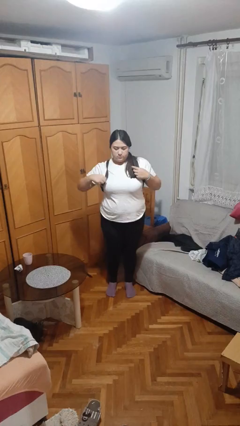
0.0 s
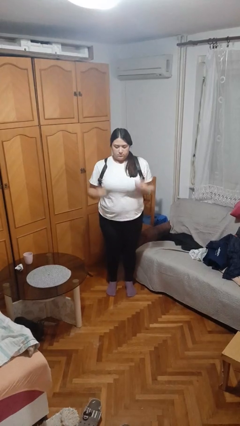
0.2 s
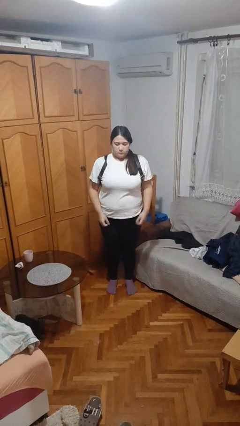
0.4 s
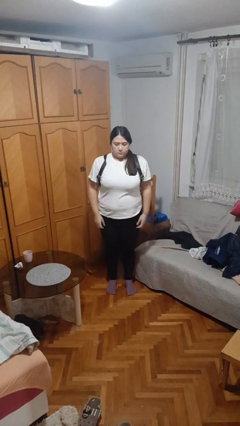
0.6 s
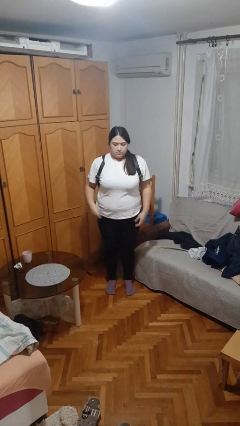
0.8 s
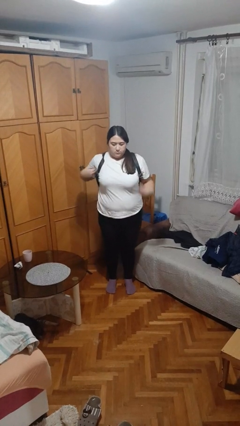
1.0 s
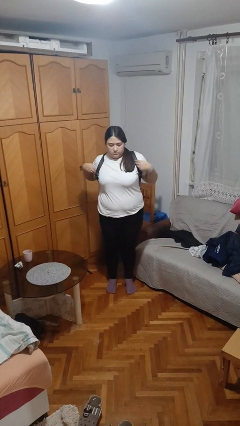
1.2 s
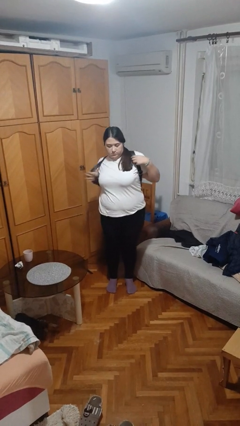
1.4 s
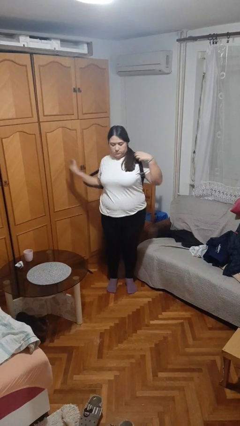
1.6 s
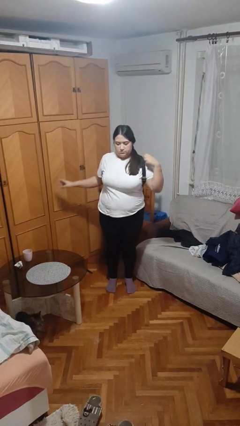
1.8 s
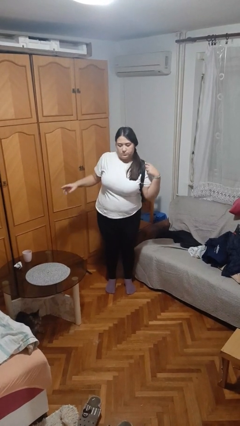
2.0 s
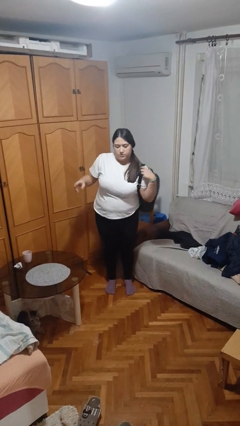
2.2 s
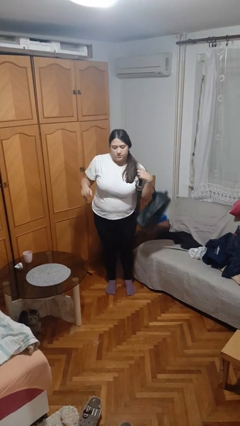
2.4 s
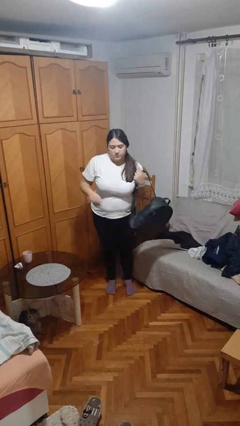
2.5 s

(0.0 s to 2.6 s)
person takes off backpack

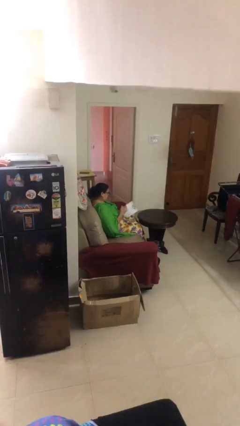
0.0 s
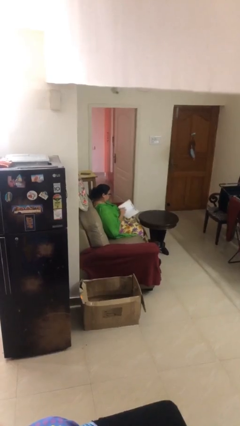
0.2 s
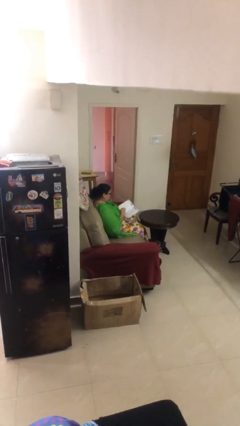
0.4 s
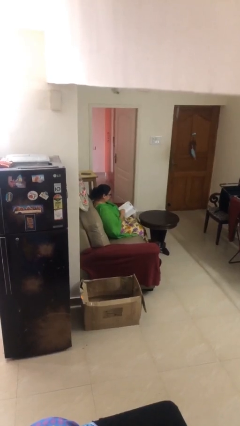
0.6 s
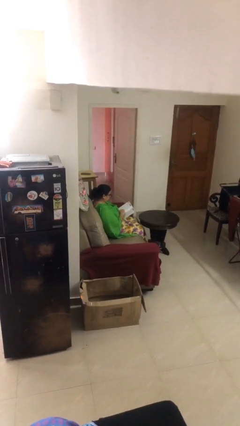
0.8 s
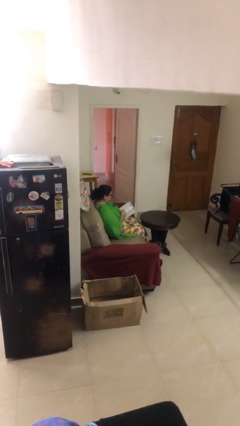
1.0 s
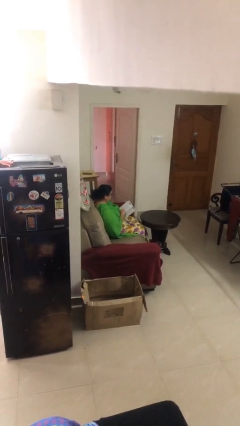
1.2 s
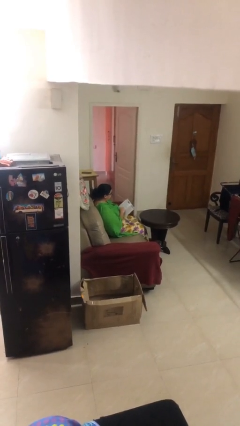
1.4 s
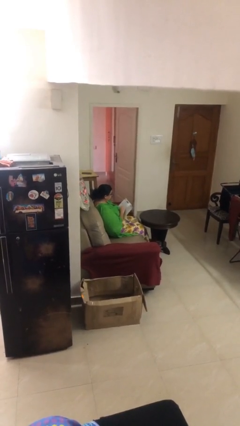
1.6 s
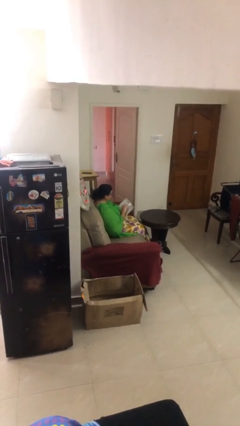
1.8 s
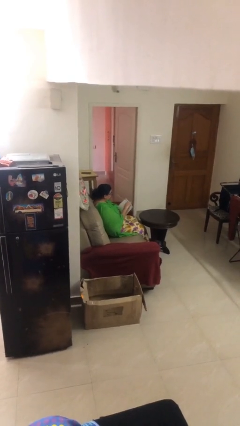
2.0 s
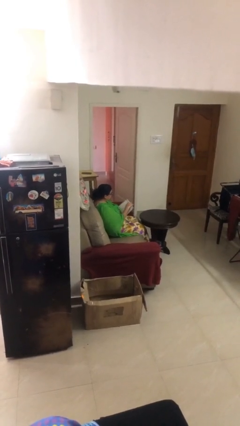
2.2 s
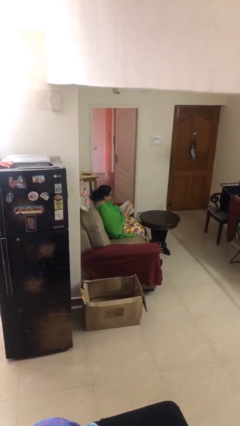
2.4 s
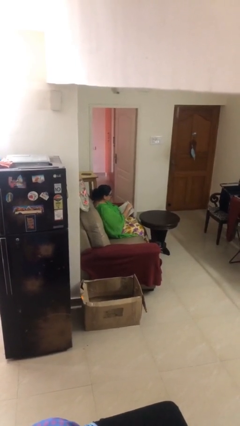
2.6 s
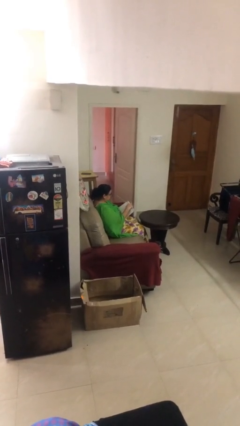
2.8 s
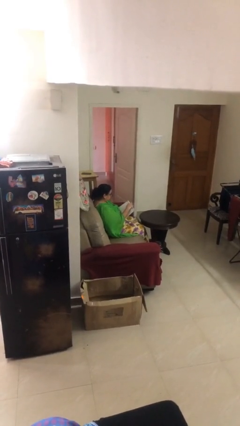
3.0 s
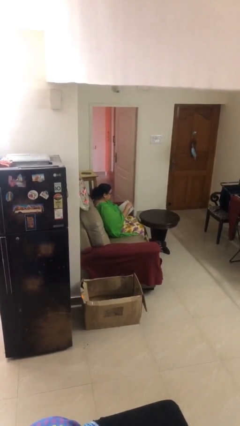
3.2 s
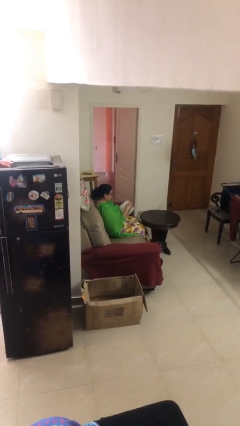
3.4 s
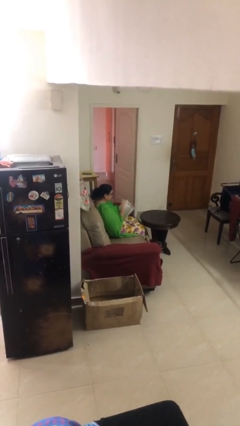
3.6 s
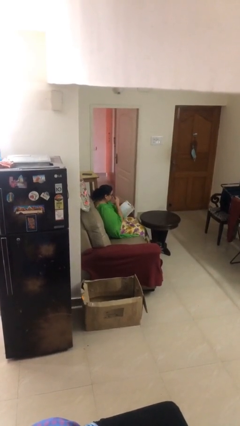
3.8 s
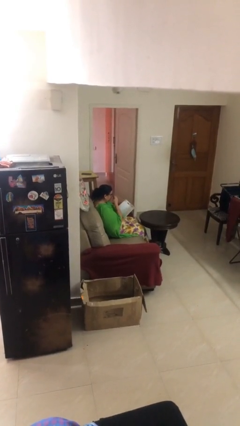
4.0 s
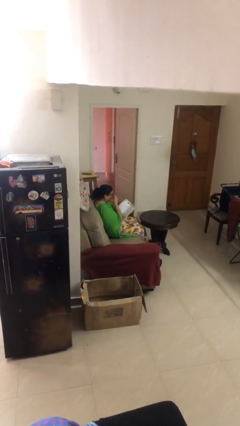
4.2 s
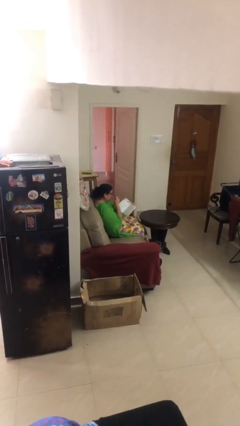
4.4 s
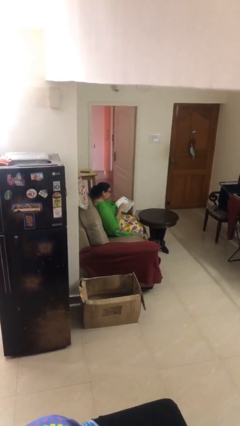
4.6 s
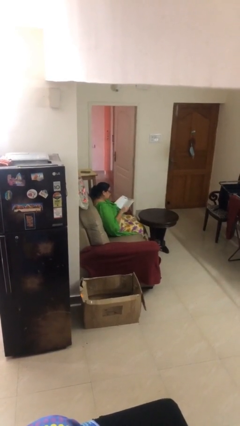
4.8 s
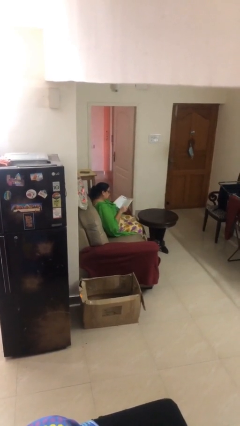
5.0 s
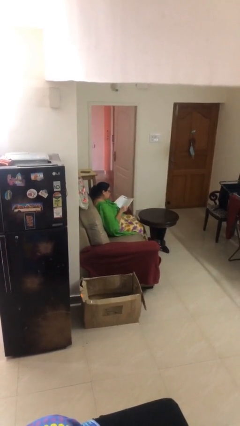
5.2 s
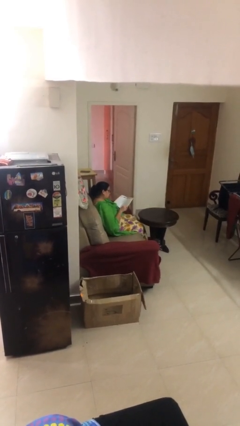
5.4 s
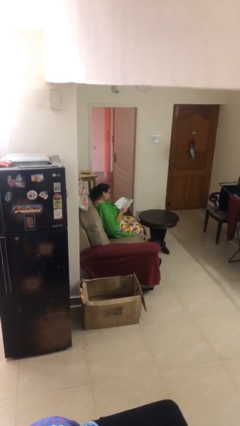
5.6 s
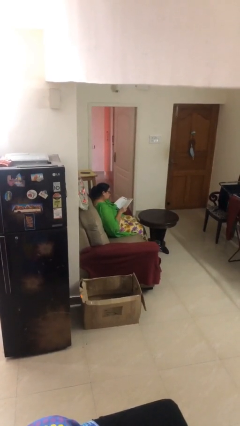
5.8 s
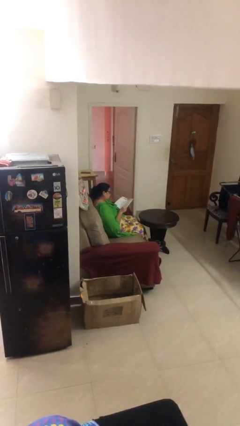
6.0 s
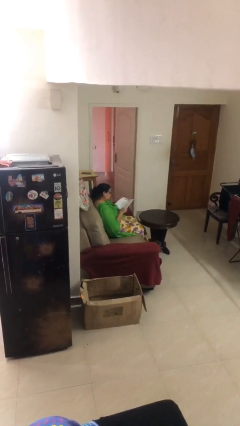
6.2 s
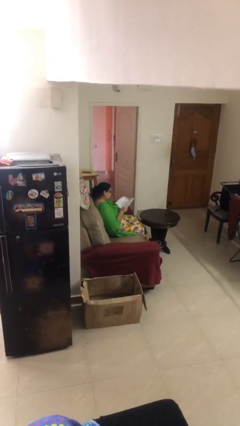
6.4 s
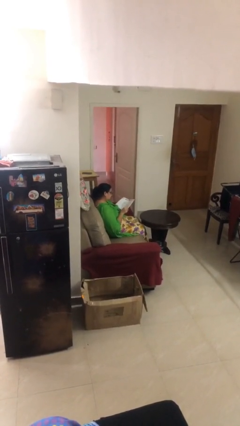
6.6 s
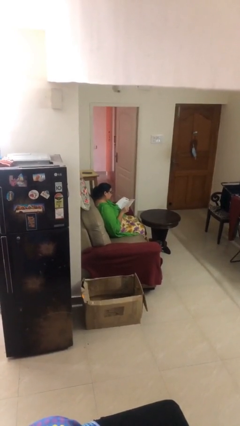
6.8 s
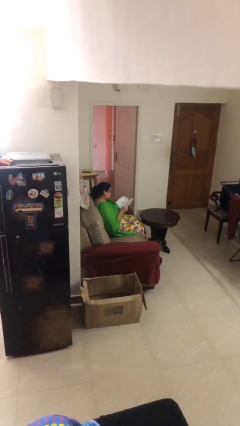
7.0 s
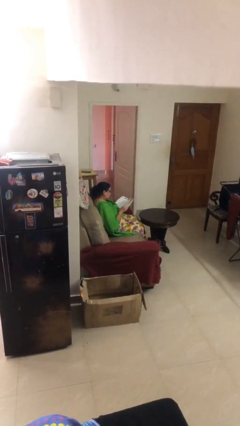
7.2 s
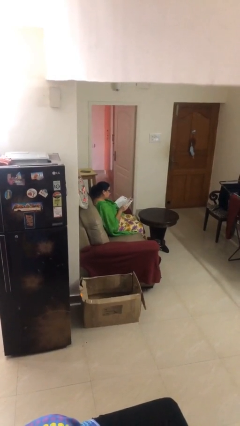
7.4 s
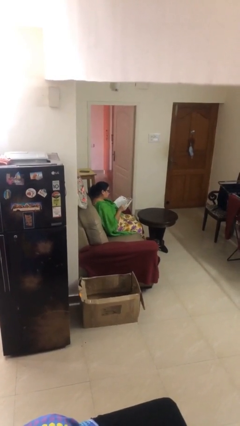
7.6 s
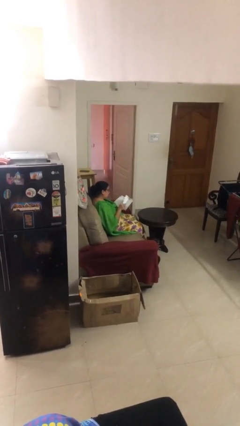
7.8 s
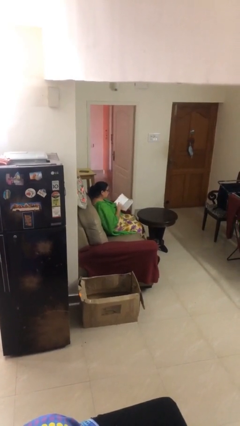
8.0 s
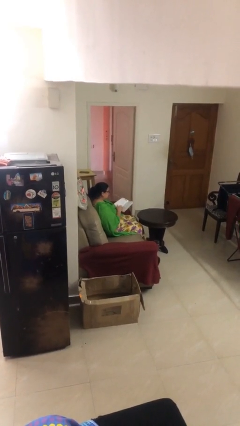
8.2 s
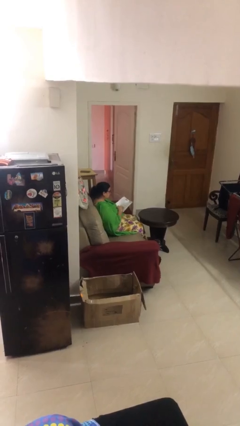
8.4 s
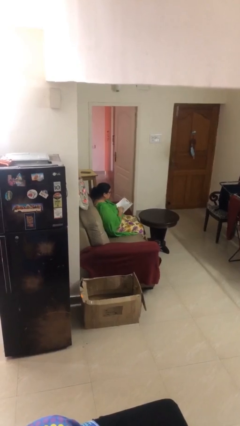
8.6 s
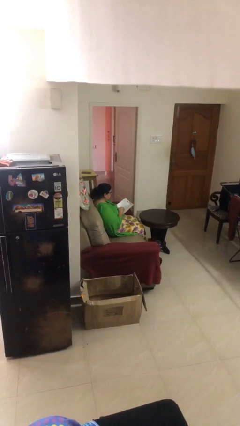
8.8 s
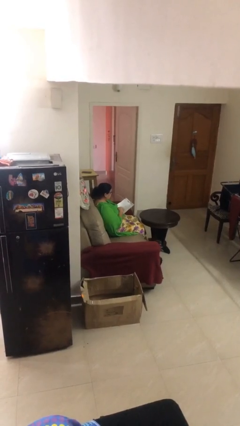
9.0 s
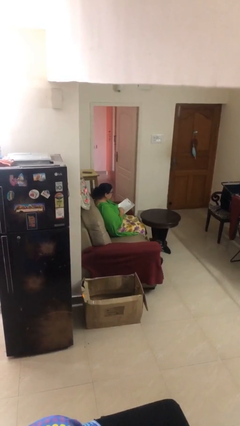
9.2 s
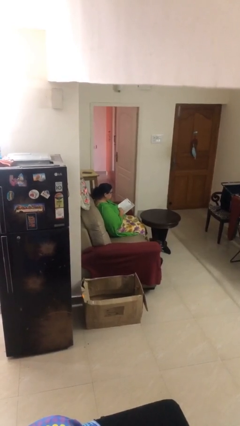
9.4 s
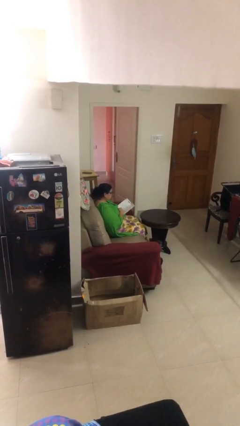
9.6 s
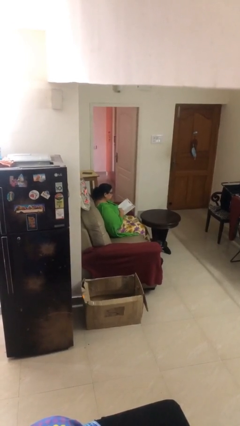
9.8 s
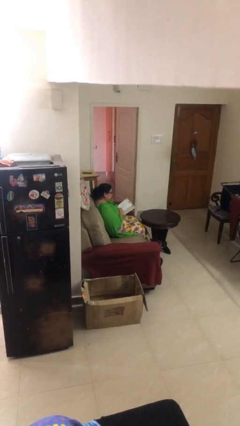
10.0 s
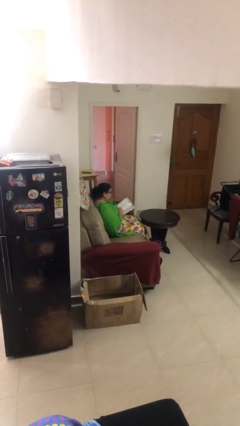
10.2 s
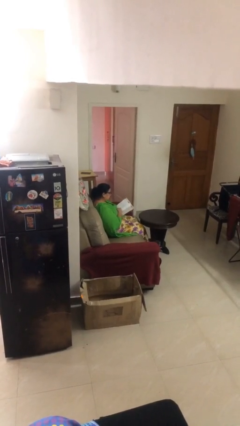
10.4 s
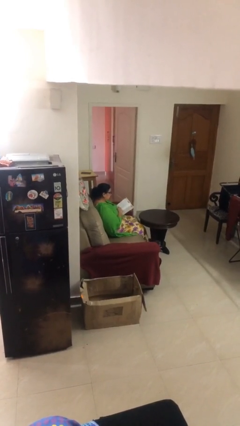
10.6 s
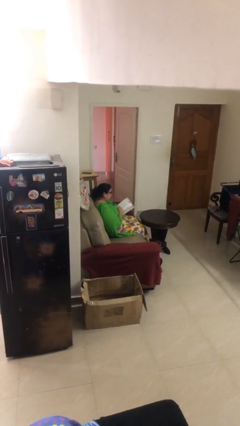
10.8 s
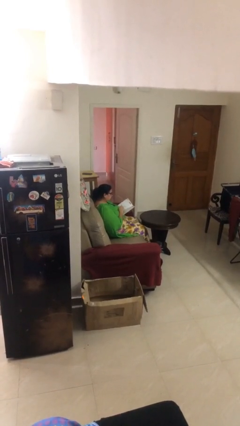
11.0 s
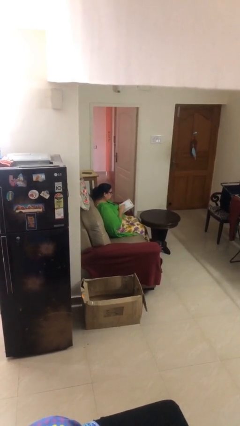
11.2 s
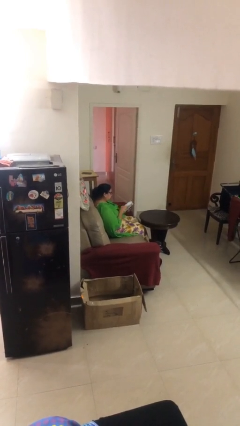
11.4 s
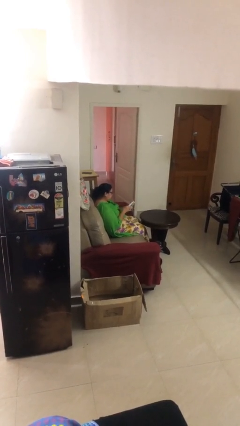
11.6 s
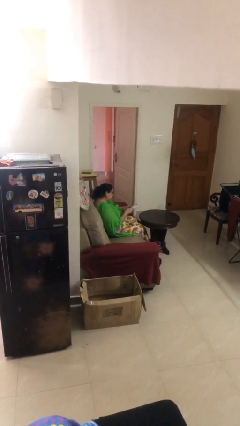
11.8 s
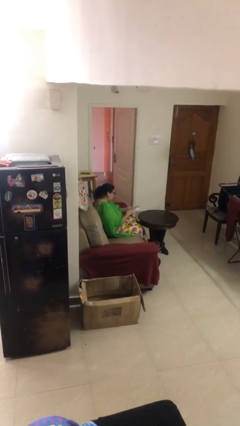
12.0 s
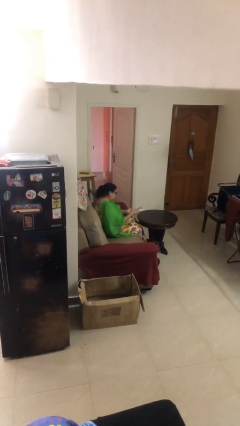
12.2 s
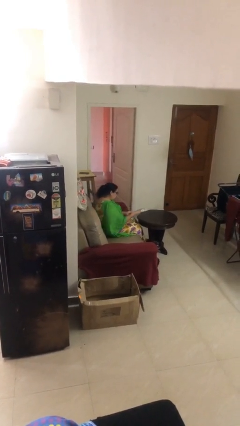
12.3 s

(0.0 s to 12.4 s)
person reads document

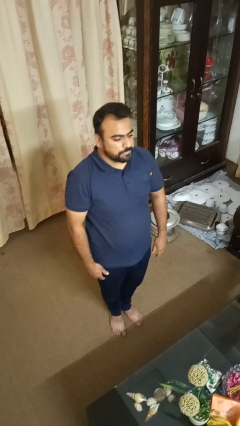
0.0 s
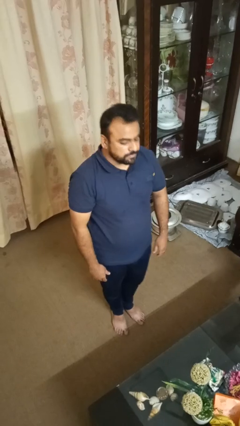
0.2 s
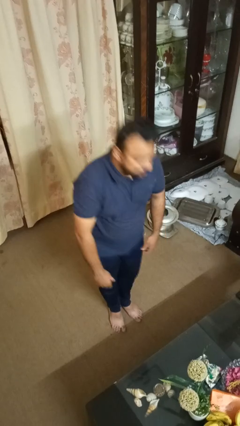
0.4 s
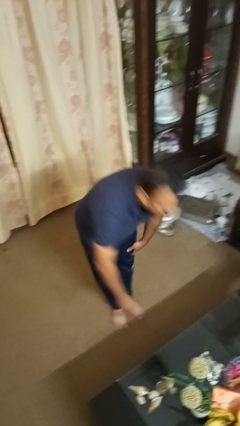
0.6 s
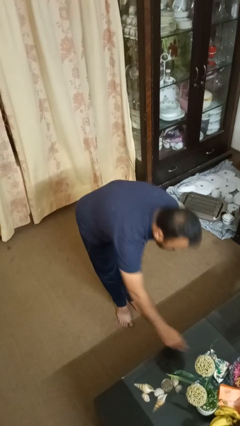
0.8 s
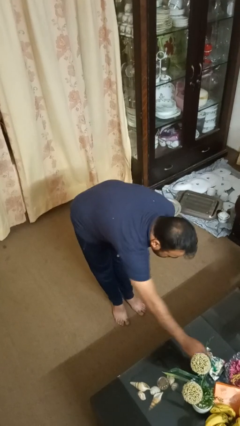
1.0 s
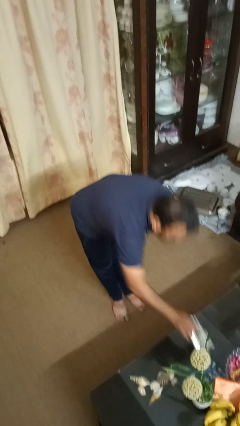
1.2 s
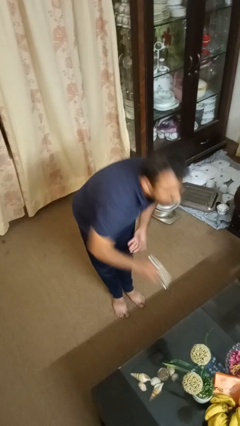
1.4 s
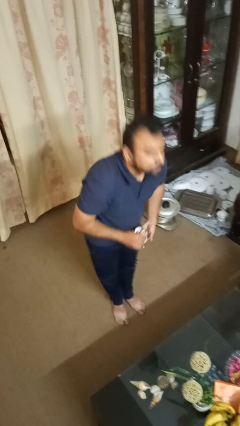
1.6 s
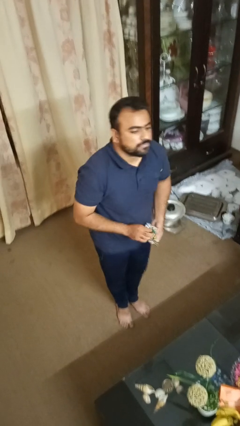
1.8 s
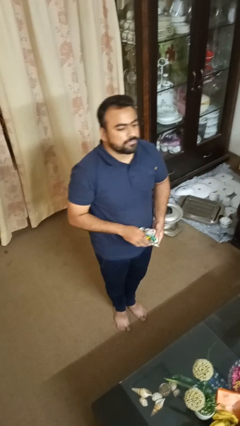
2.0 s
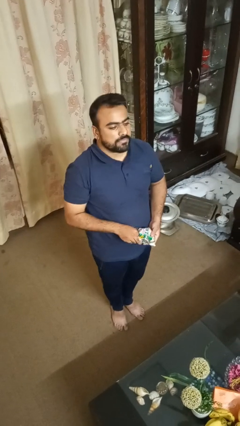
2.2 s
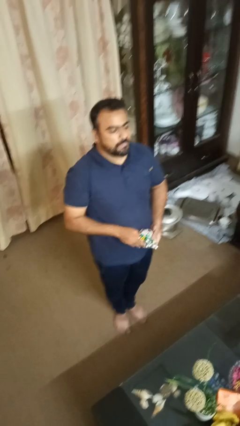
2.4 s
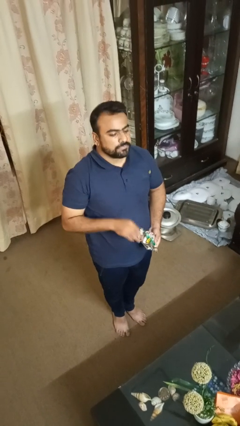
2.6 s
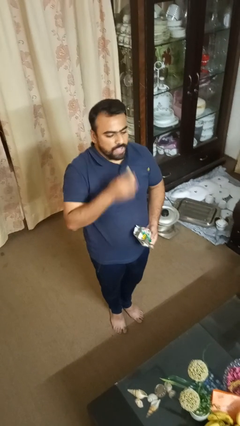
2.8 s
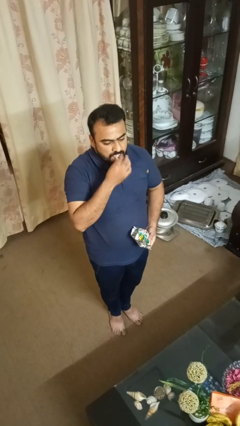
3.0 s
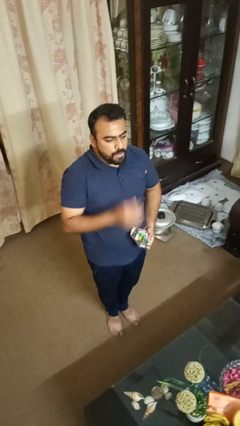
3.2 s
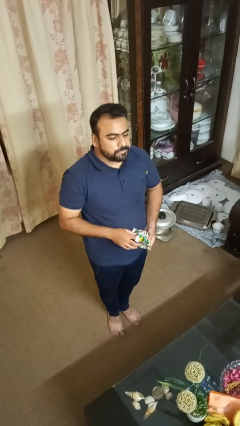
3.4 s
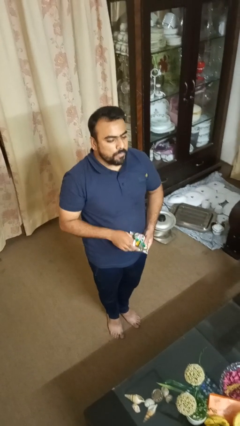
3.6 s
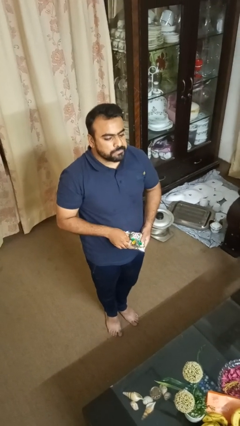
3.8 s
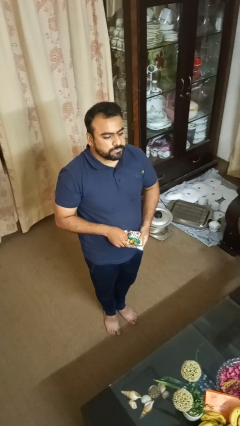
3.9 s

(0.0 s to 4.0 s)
person eats snack from bag
